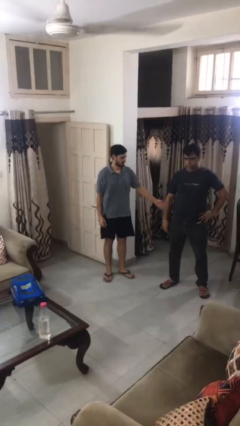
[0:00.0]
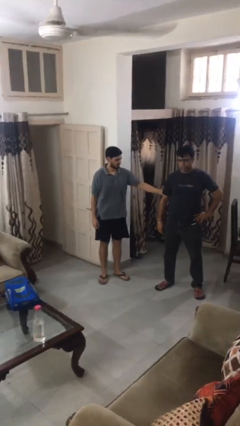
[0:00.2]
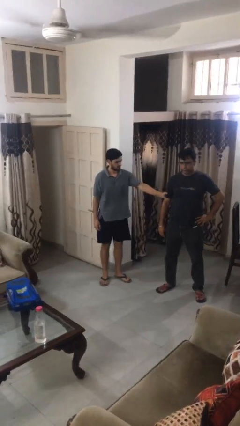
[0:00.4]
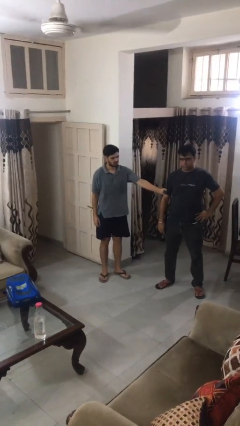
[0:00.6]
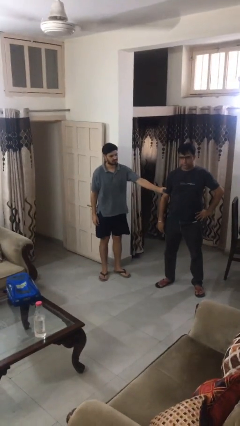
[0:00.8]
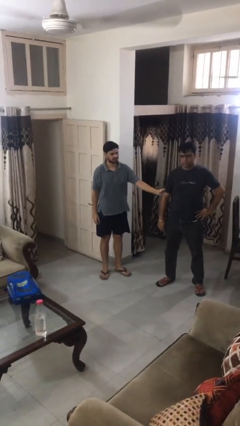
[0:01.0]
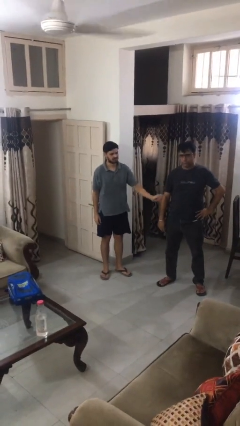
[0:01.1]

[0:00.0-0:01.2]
person grabs person by bicep

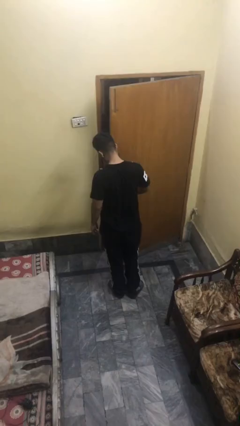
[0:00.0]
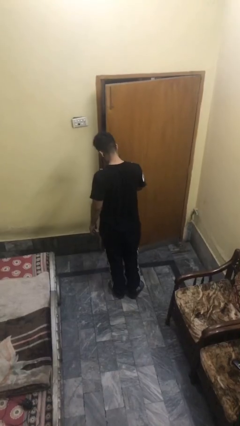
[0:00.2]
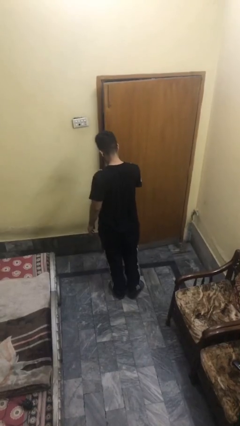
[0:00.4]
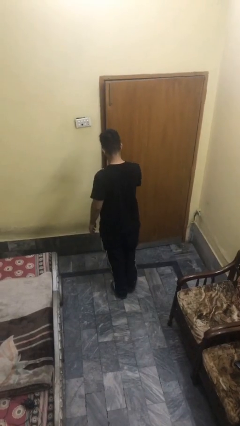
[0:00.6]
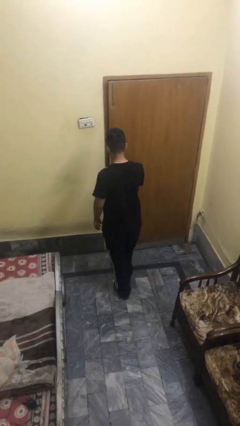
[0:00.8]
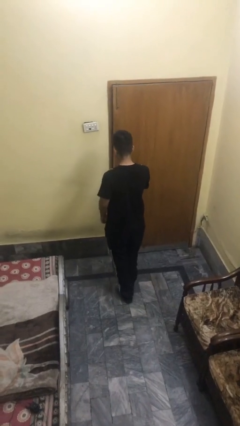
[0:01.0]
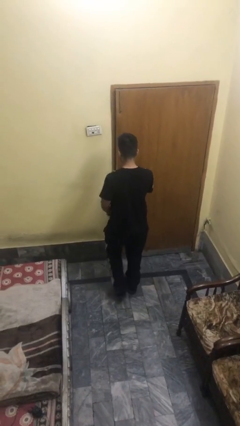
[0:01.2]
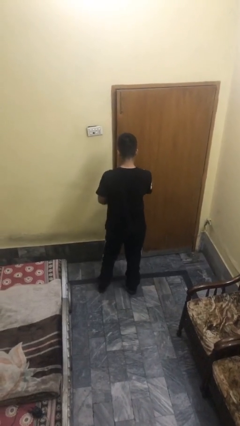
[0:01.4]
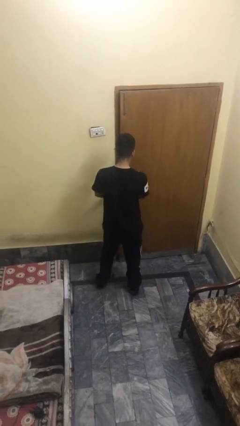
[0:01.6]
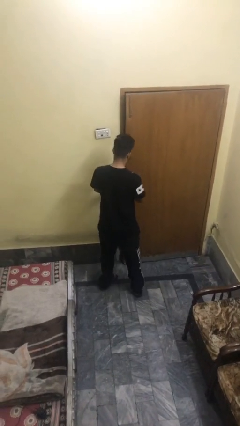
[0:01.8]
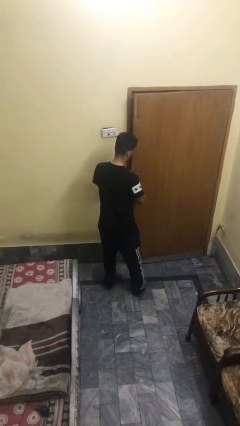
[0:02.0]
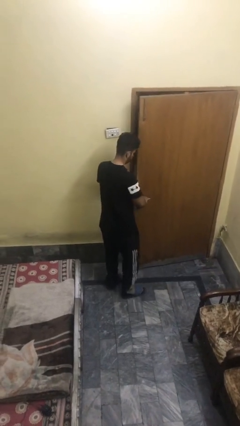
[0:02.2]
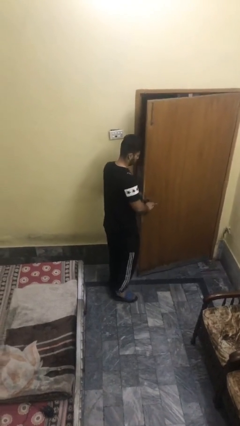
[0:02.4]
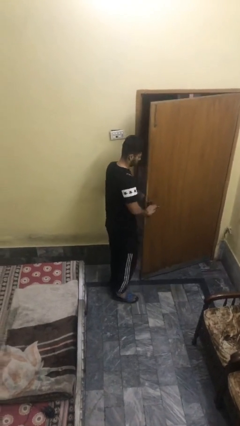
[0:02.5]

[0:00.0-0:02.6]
person closes facility door

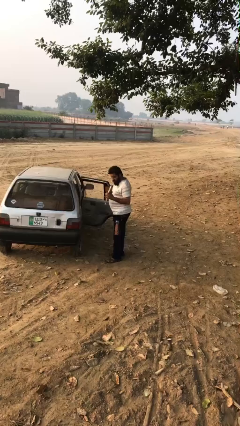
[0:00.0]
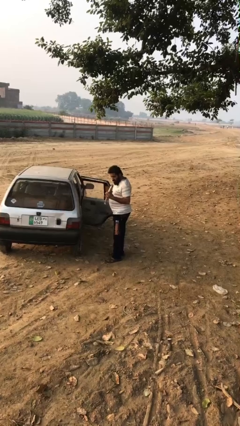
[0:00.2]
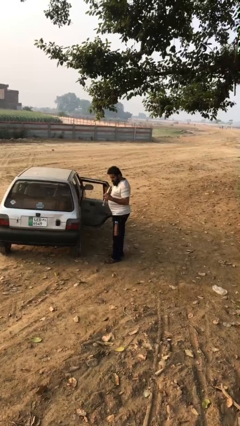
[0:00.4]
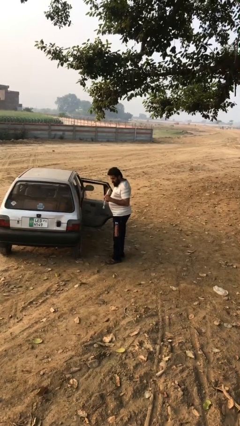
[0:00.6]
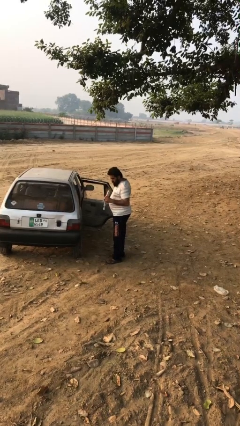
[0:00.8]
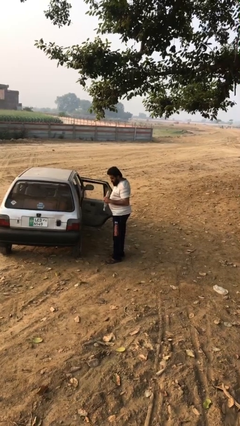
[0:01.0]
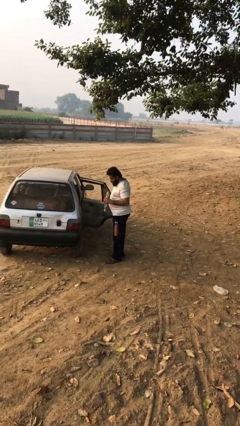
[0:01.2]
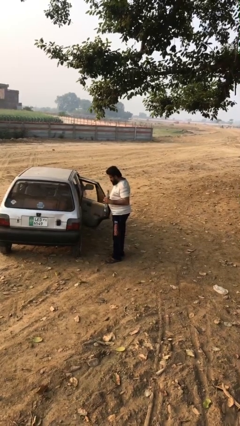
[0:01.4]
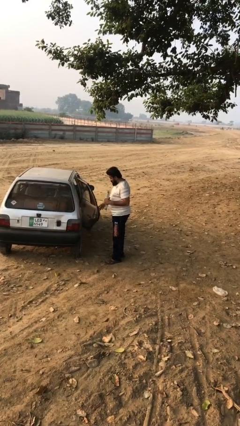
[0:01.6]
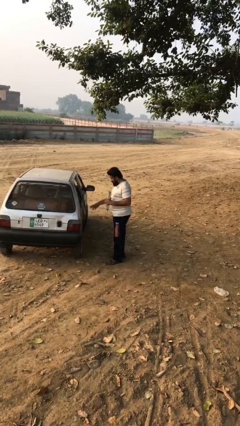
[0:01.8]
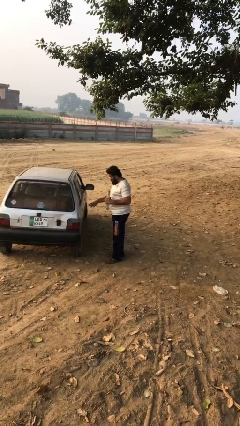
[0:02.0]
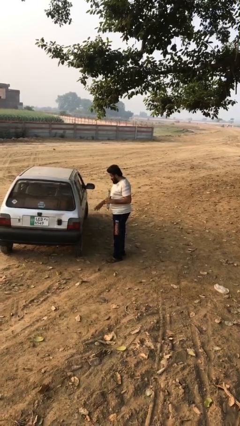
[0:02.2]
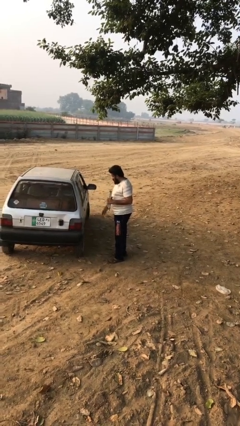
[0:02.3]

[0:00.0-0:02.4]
person closes car door

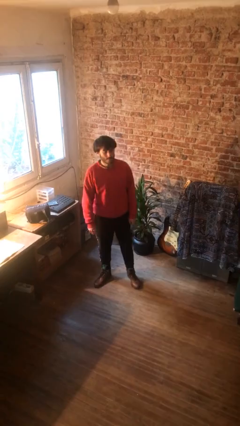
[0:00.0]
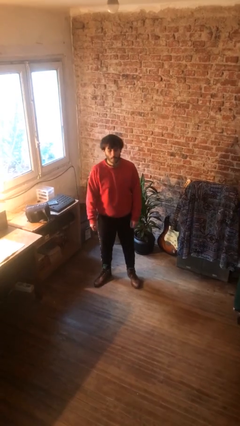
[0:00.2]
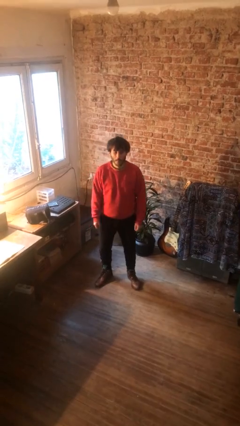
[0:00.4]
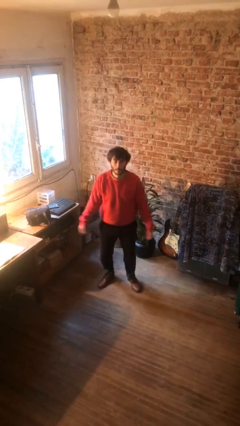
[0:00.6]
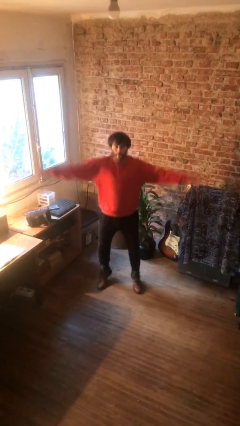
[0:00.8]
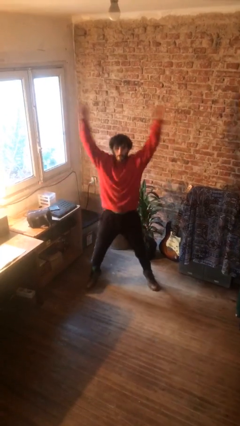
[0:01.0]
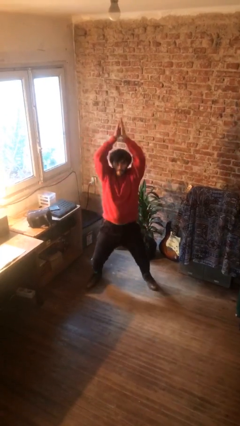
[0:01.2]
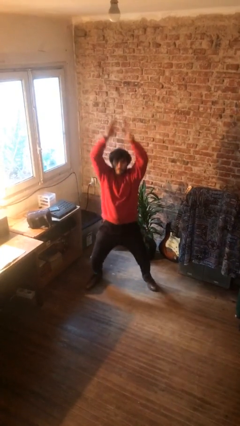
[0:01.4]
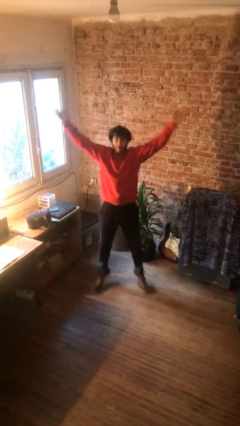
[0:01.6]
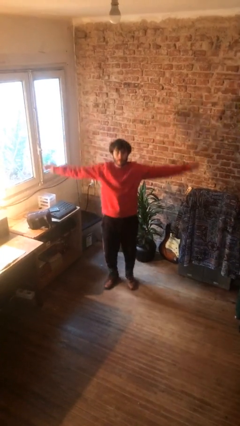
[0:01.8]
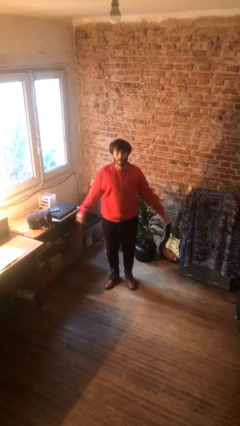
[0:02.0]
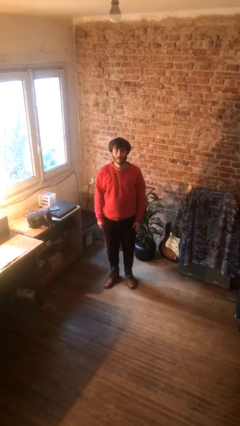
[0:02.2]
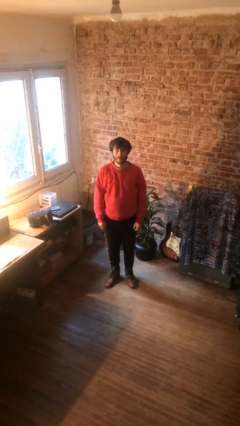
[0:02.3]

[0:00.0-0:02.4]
person exercises with jumping jacks

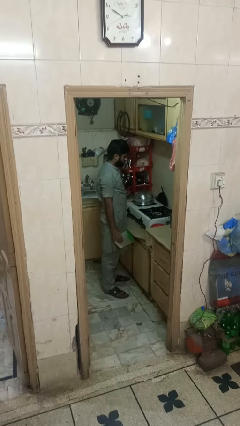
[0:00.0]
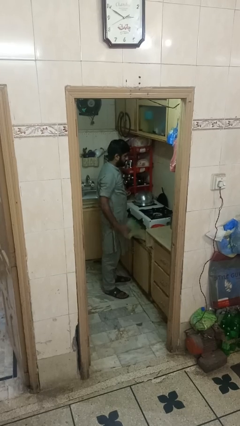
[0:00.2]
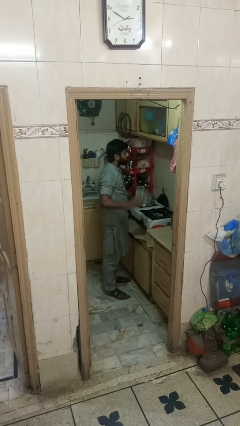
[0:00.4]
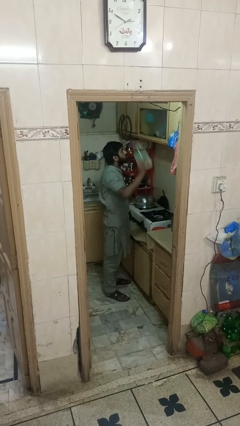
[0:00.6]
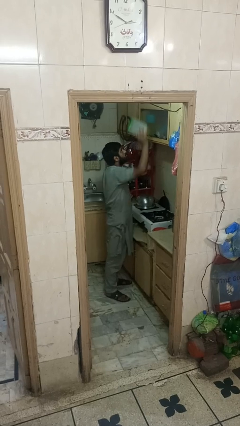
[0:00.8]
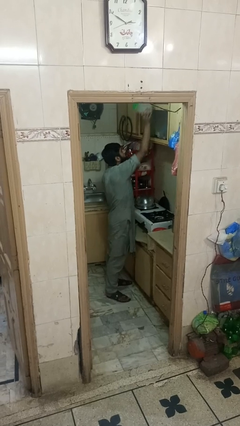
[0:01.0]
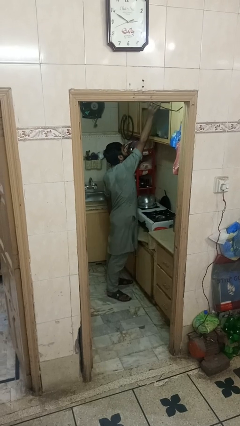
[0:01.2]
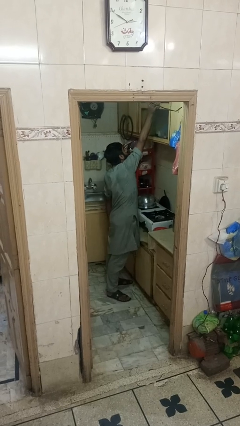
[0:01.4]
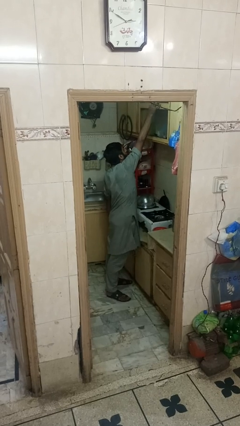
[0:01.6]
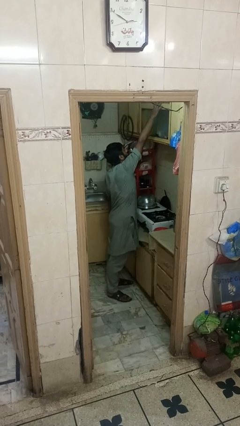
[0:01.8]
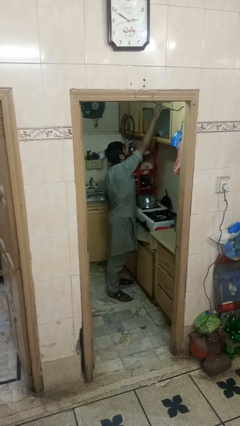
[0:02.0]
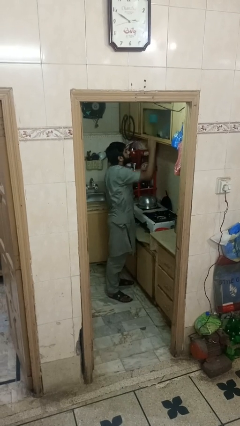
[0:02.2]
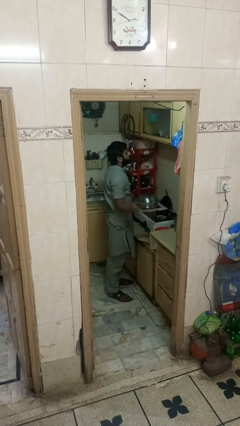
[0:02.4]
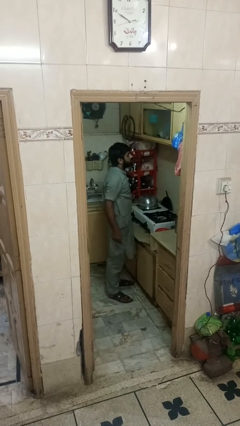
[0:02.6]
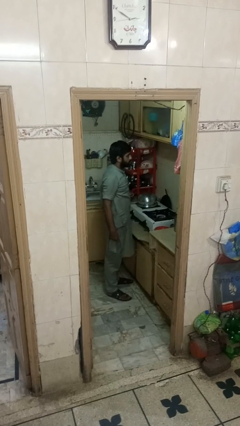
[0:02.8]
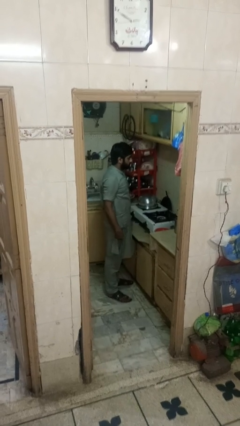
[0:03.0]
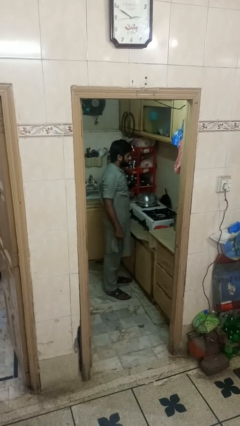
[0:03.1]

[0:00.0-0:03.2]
person puts down object on shelf

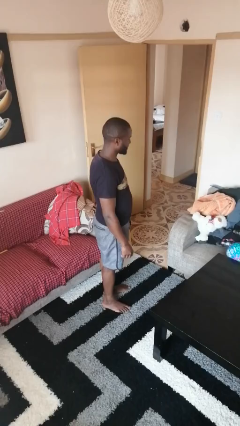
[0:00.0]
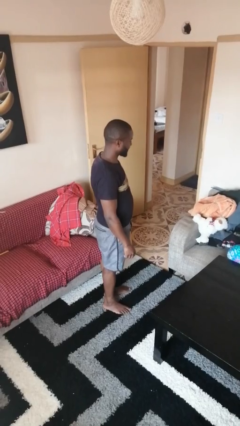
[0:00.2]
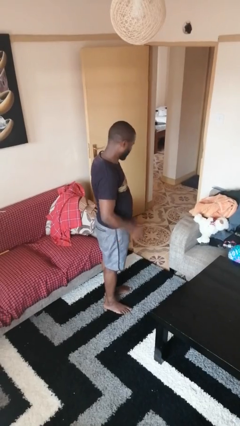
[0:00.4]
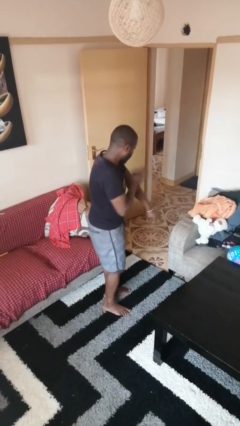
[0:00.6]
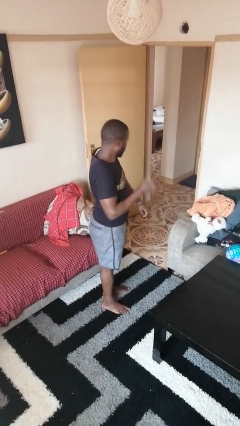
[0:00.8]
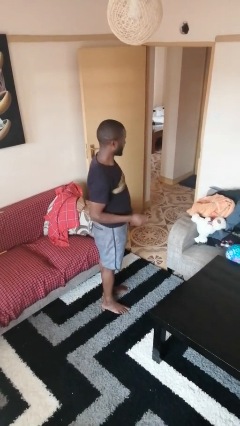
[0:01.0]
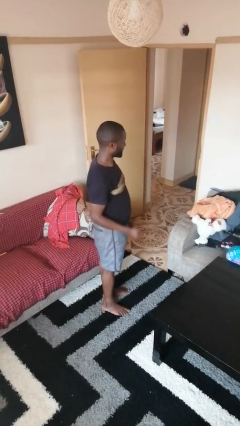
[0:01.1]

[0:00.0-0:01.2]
person swats bug

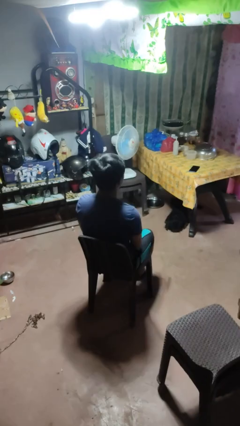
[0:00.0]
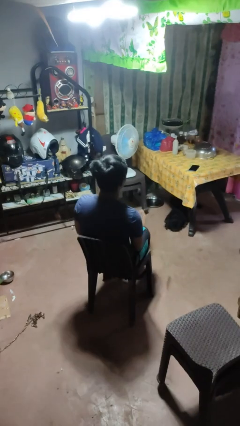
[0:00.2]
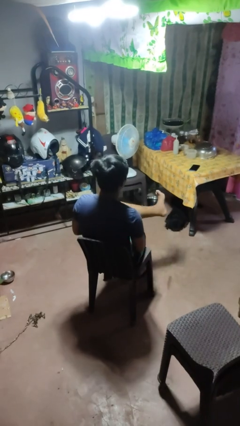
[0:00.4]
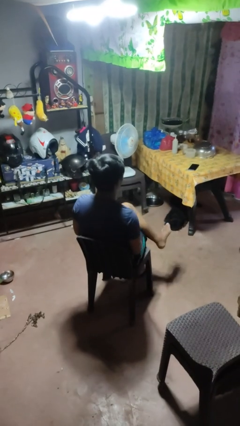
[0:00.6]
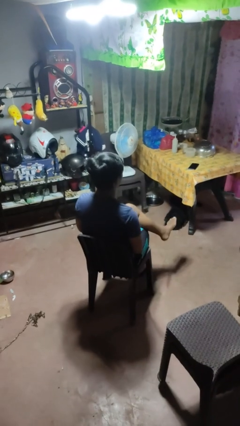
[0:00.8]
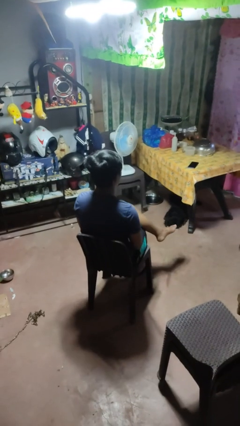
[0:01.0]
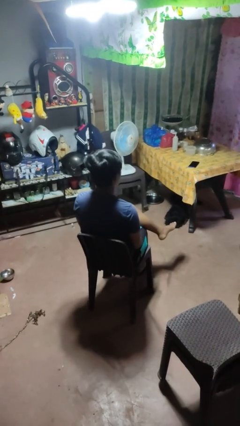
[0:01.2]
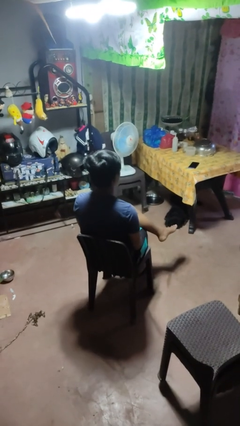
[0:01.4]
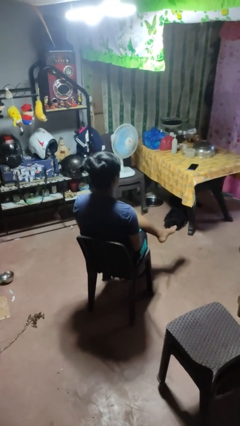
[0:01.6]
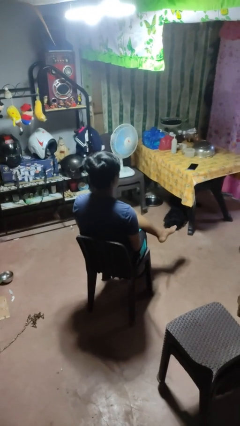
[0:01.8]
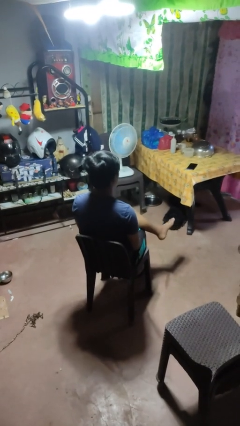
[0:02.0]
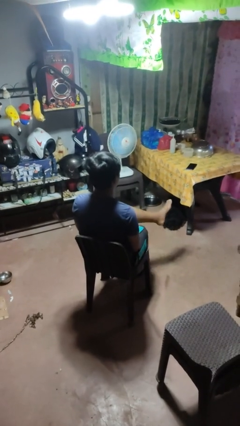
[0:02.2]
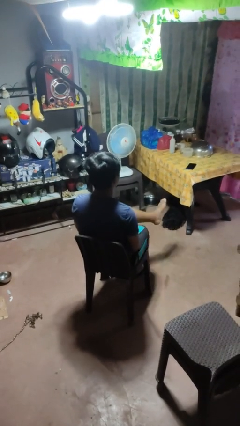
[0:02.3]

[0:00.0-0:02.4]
person crosses legs

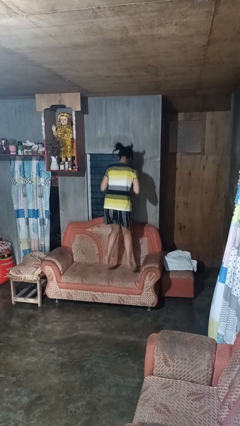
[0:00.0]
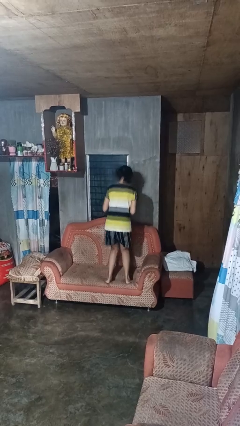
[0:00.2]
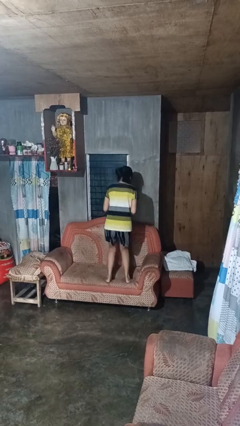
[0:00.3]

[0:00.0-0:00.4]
person jumps on couch

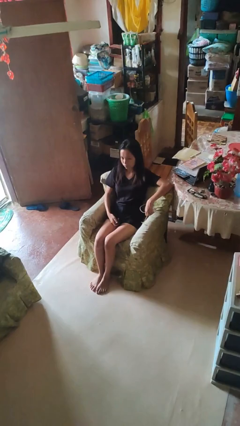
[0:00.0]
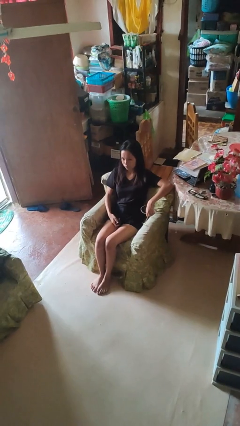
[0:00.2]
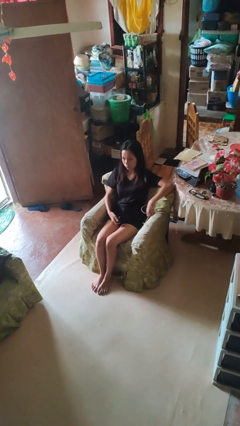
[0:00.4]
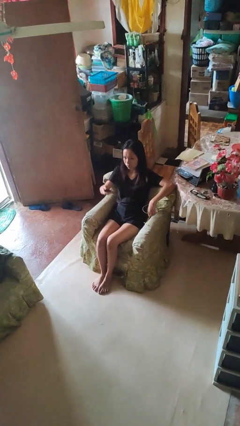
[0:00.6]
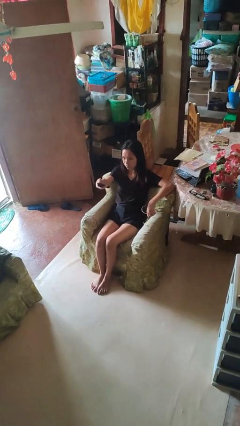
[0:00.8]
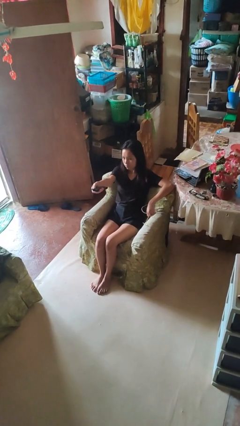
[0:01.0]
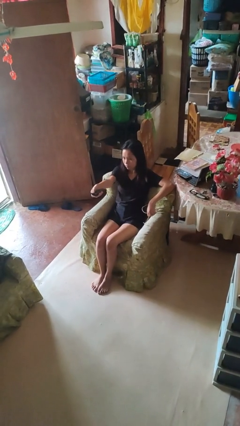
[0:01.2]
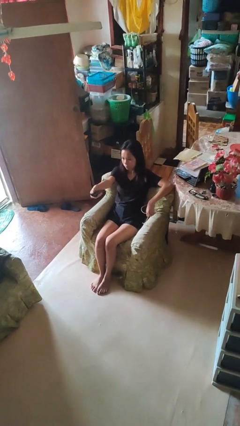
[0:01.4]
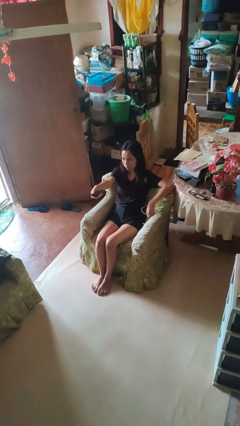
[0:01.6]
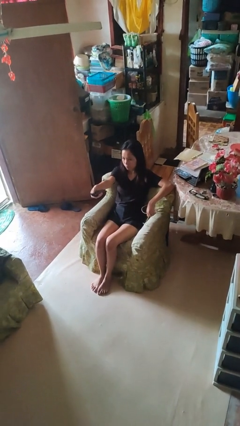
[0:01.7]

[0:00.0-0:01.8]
person uses television remote
